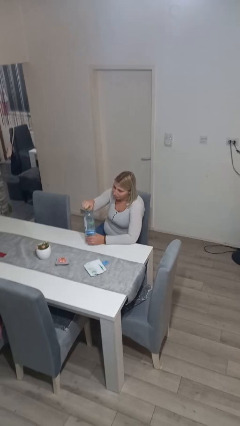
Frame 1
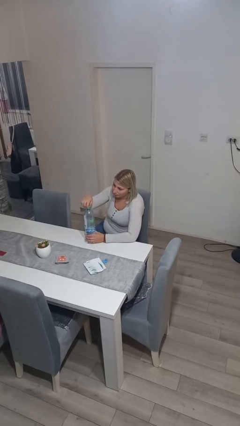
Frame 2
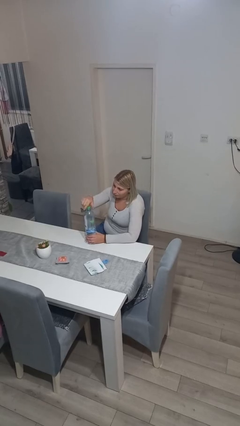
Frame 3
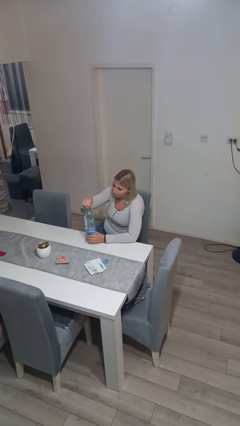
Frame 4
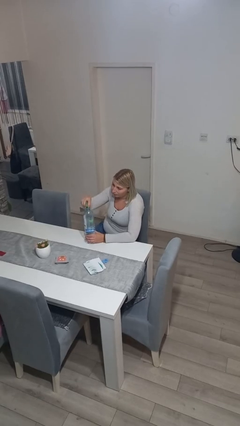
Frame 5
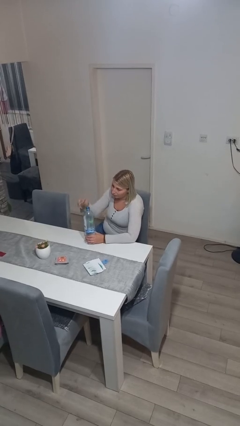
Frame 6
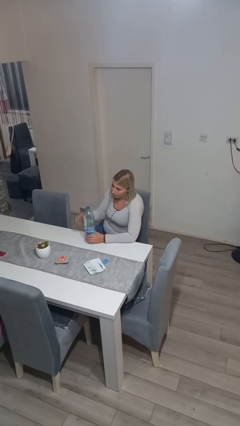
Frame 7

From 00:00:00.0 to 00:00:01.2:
person unscrews lid from bottle

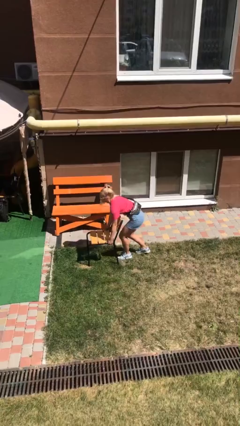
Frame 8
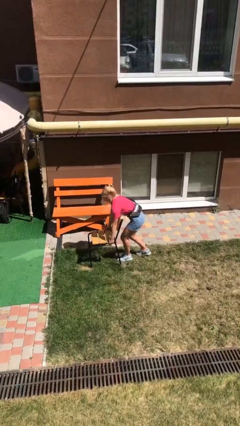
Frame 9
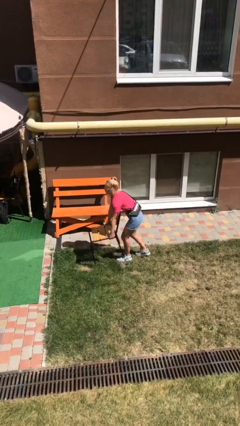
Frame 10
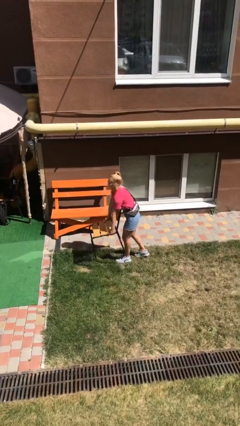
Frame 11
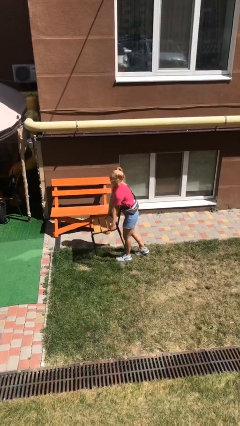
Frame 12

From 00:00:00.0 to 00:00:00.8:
person picks up object from floor

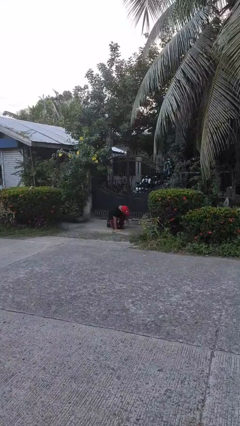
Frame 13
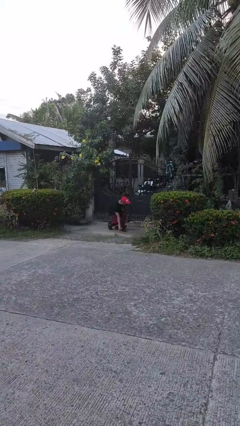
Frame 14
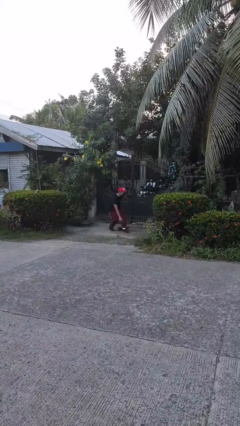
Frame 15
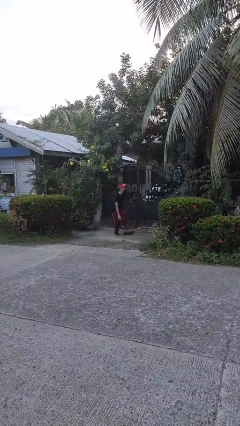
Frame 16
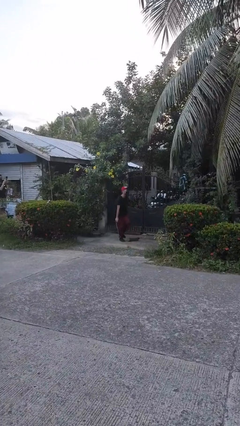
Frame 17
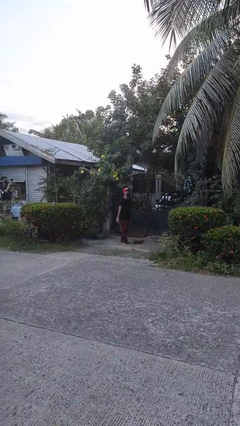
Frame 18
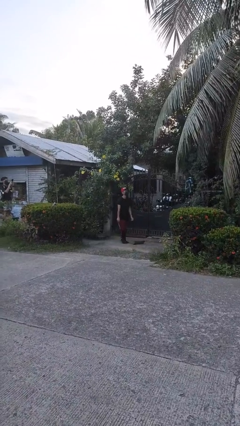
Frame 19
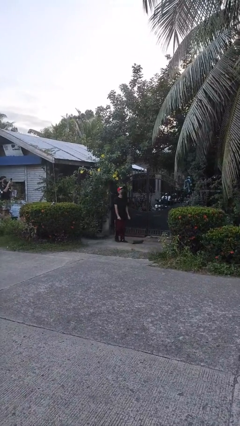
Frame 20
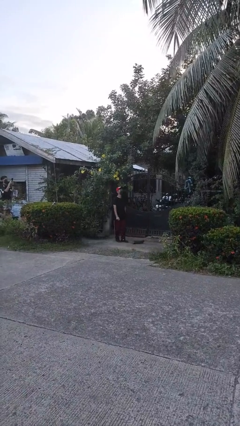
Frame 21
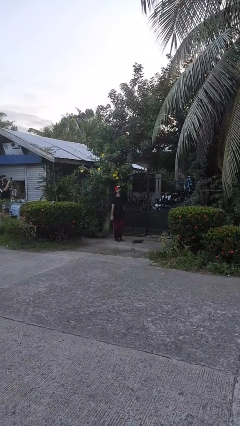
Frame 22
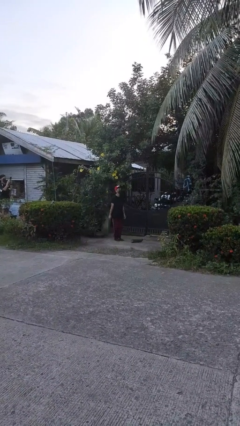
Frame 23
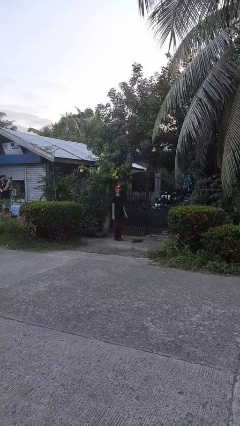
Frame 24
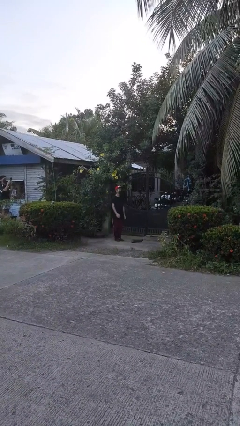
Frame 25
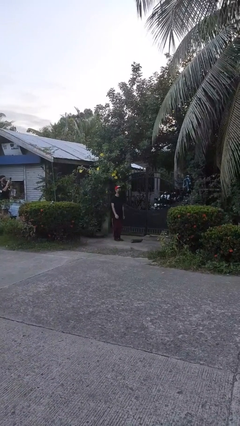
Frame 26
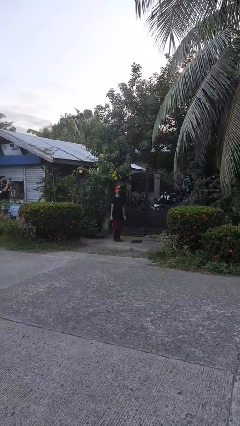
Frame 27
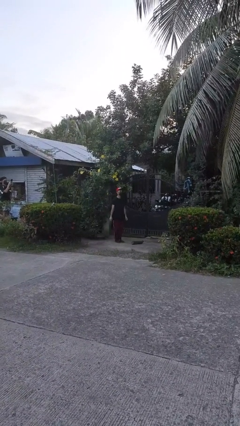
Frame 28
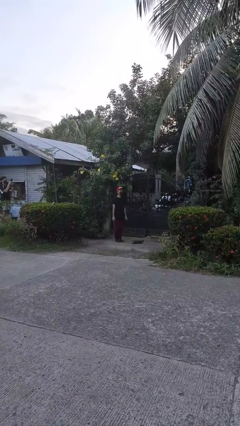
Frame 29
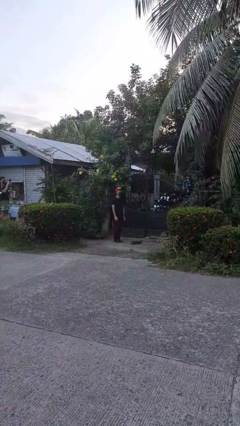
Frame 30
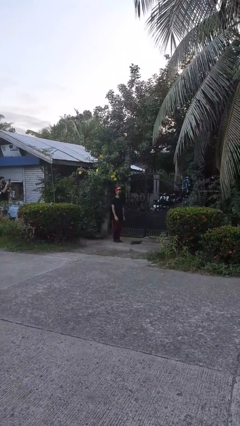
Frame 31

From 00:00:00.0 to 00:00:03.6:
person stands up from floor

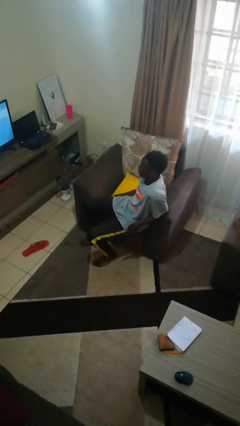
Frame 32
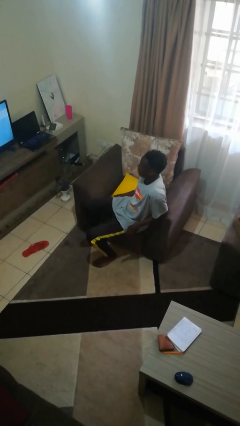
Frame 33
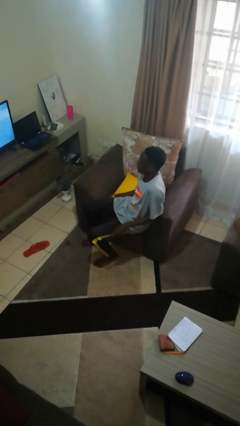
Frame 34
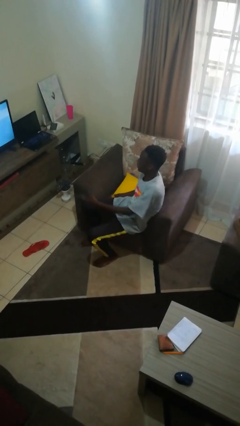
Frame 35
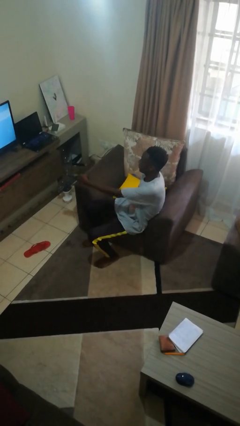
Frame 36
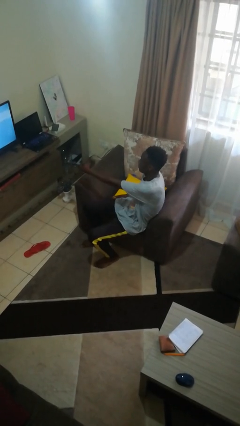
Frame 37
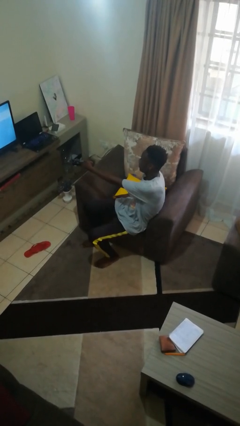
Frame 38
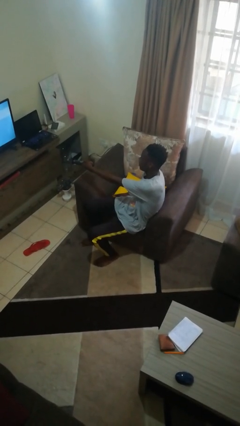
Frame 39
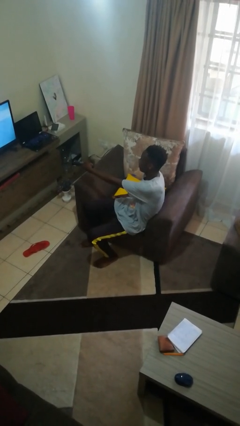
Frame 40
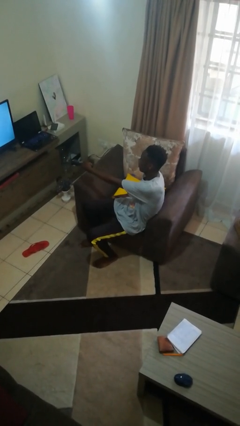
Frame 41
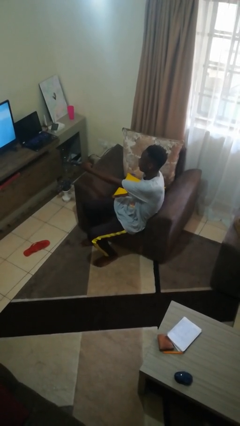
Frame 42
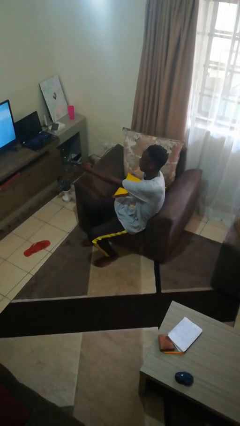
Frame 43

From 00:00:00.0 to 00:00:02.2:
person uses television remote

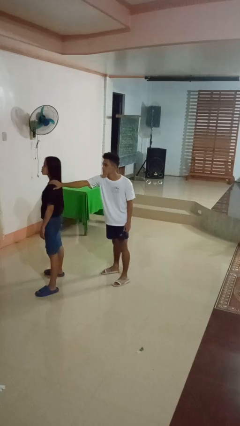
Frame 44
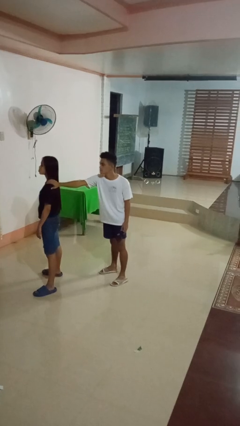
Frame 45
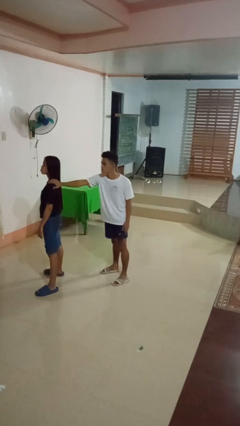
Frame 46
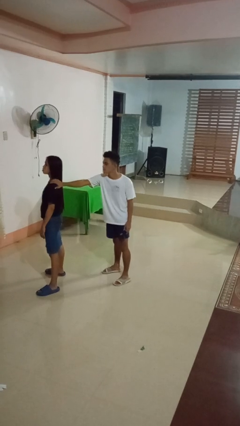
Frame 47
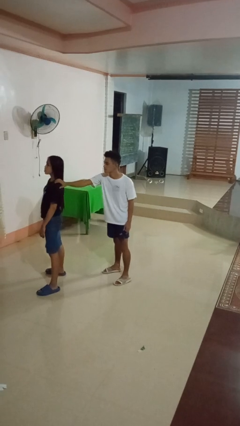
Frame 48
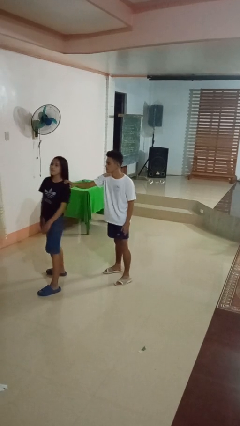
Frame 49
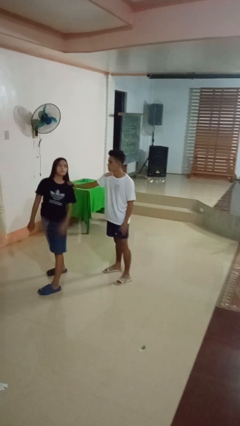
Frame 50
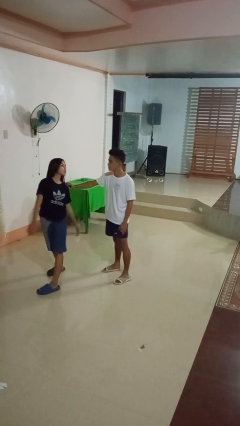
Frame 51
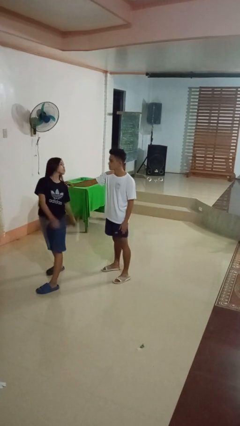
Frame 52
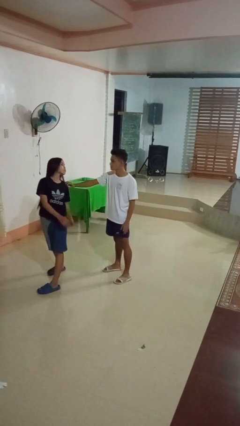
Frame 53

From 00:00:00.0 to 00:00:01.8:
person grabs person by shoulder

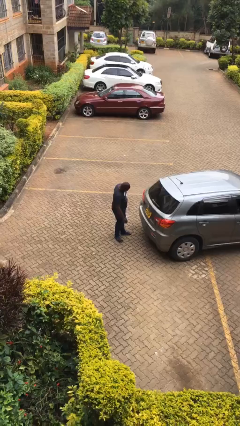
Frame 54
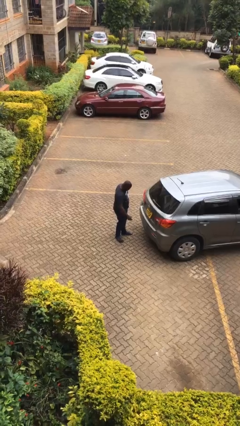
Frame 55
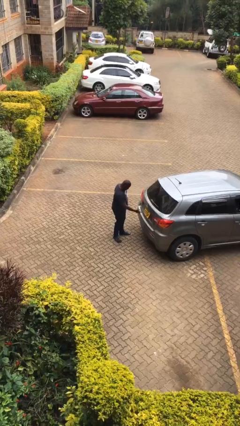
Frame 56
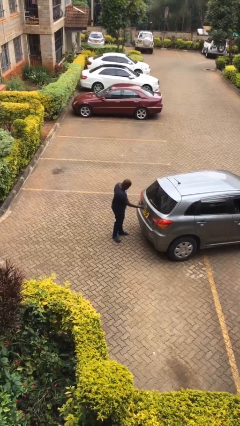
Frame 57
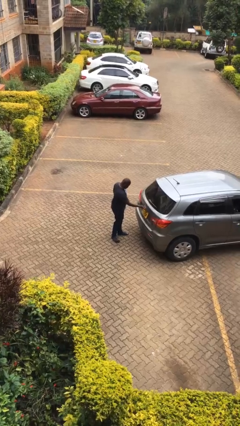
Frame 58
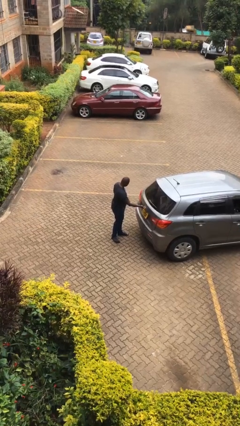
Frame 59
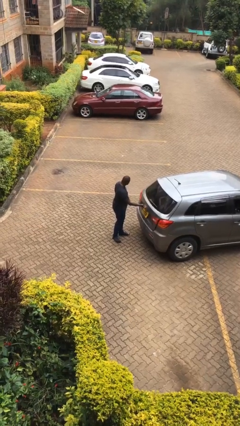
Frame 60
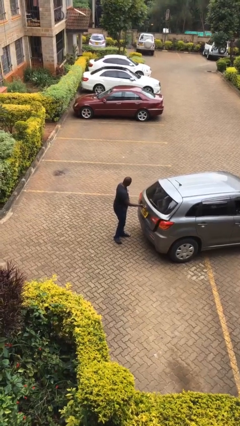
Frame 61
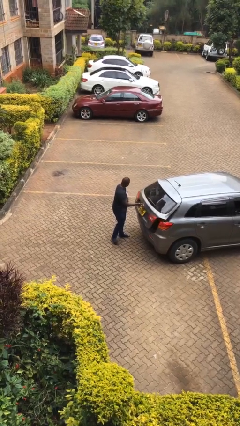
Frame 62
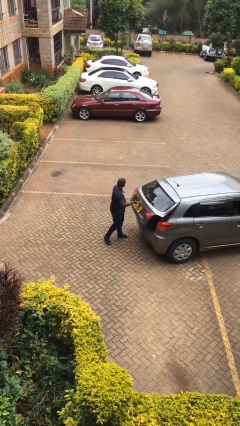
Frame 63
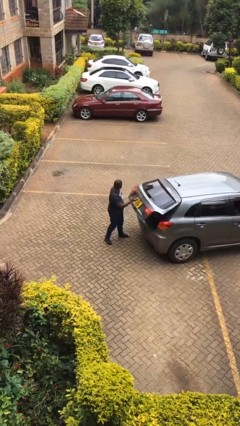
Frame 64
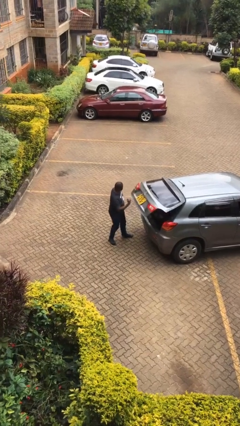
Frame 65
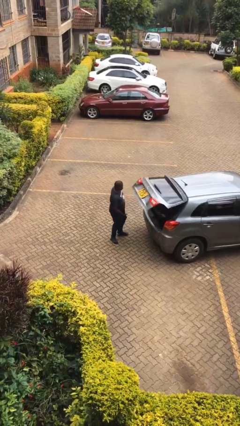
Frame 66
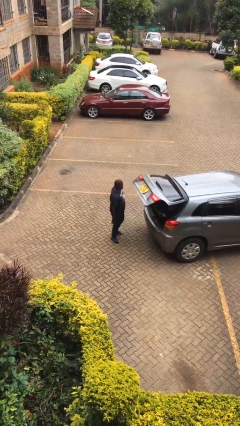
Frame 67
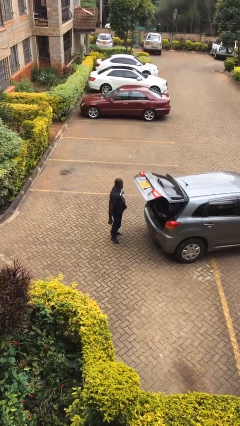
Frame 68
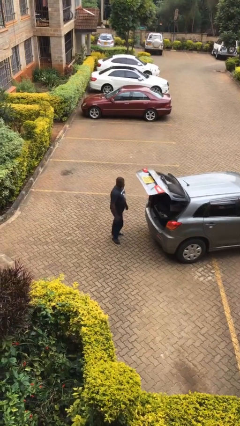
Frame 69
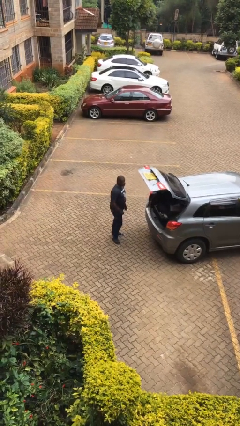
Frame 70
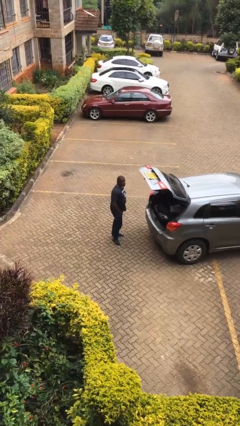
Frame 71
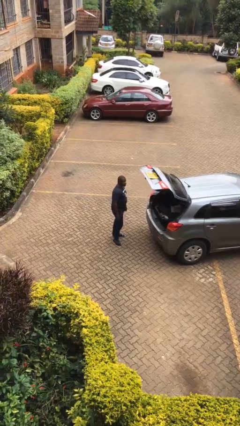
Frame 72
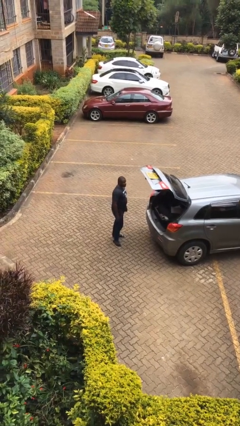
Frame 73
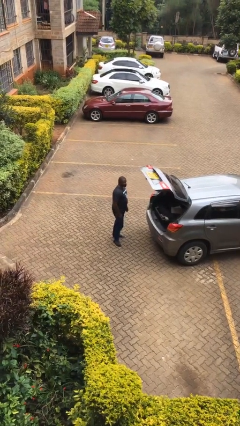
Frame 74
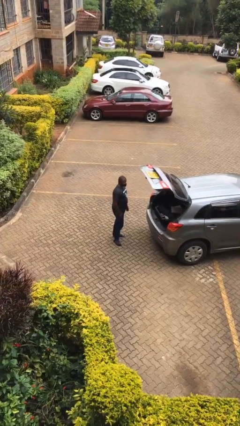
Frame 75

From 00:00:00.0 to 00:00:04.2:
person opens car trunk

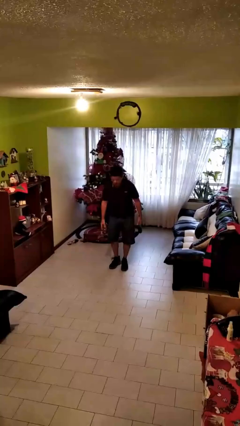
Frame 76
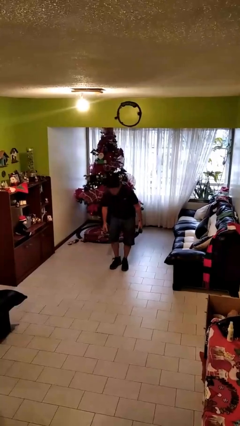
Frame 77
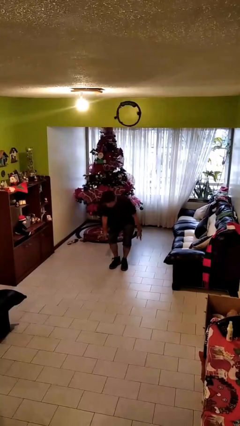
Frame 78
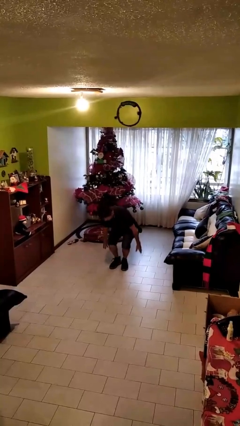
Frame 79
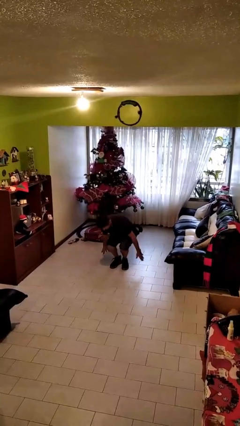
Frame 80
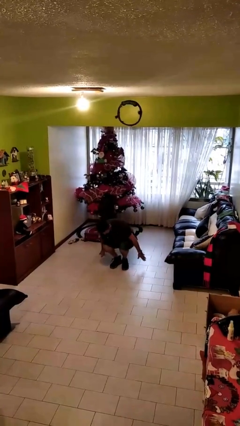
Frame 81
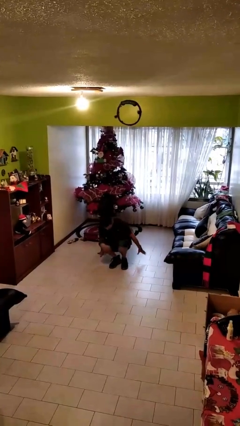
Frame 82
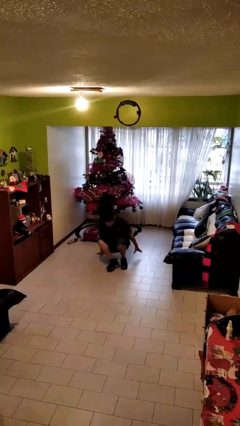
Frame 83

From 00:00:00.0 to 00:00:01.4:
person sits down

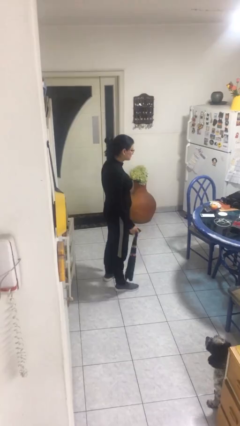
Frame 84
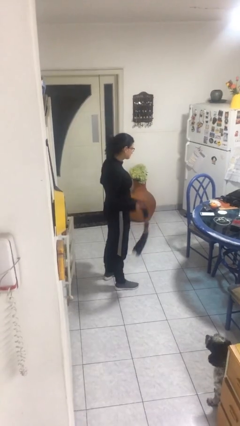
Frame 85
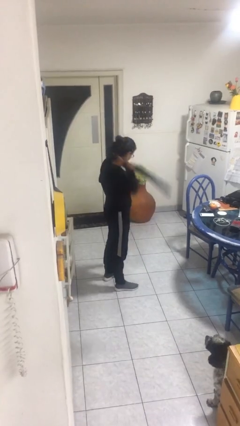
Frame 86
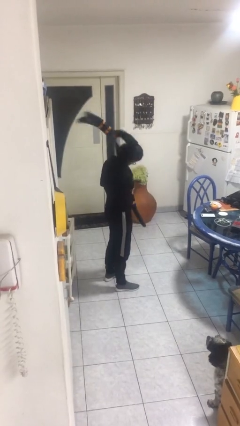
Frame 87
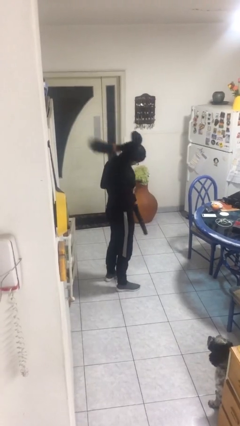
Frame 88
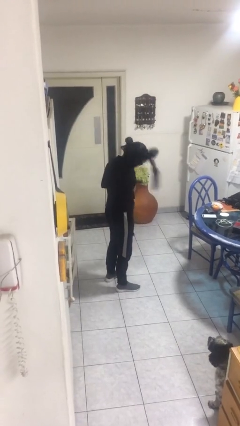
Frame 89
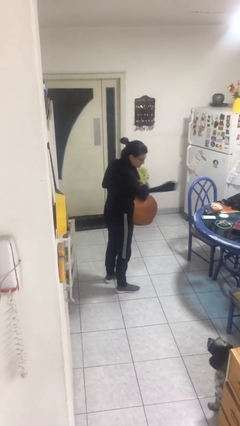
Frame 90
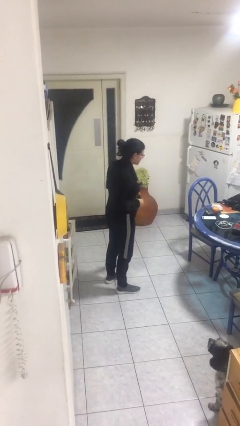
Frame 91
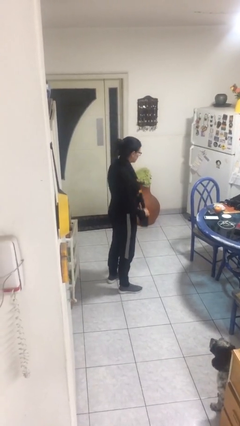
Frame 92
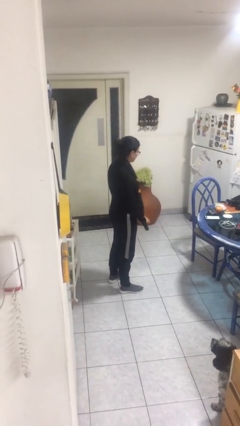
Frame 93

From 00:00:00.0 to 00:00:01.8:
person puts on scarf
